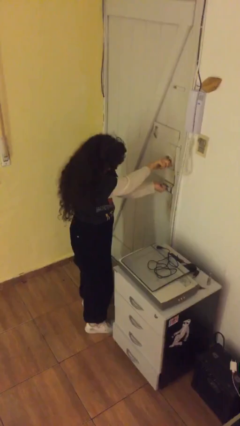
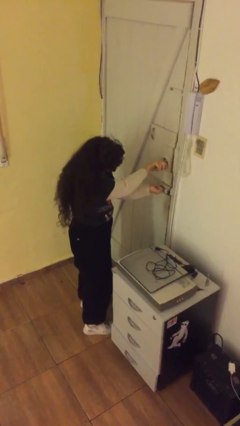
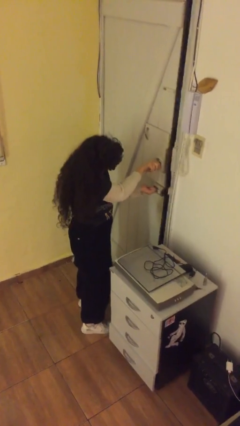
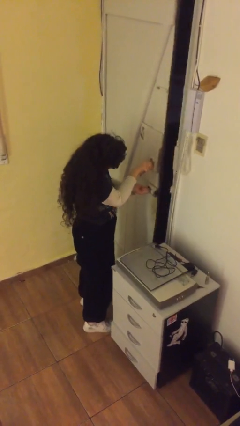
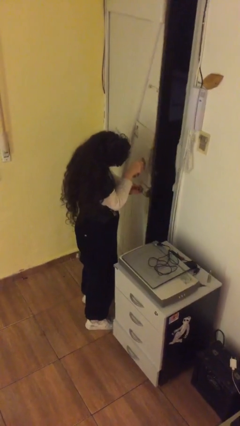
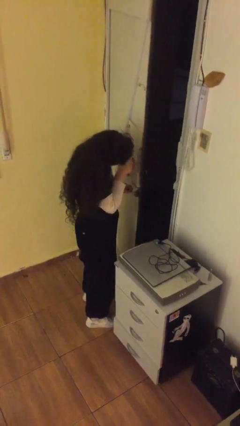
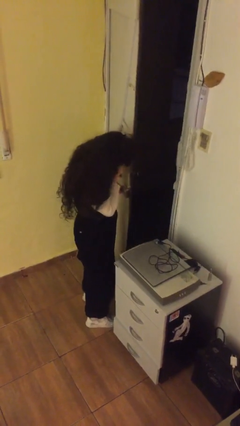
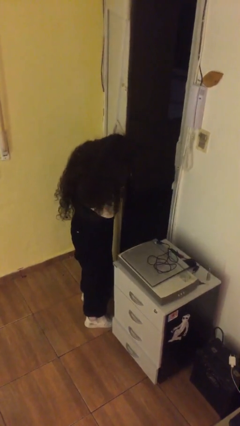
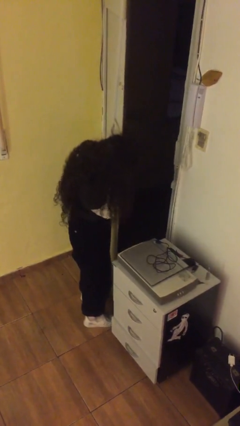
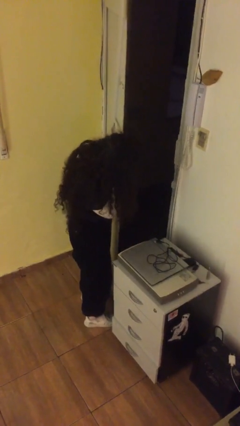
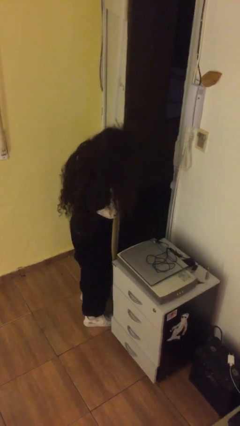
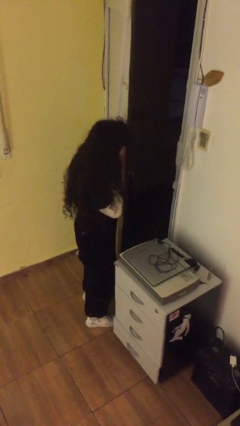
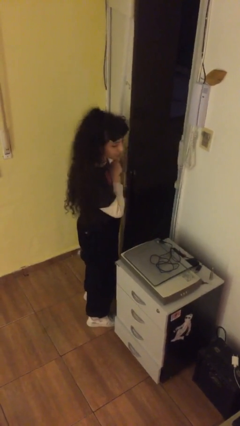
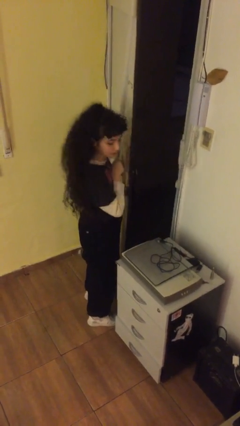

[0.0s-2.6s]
person opens facility door

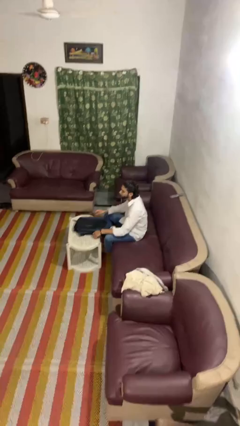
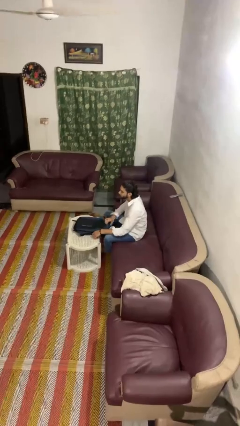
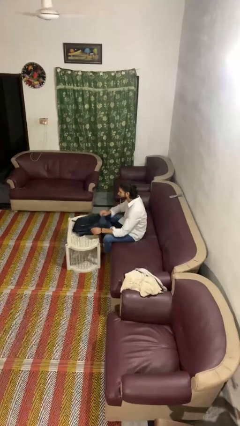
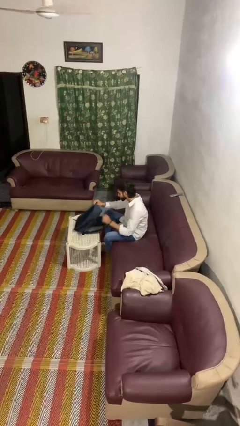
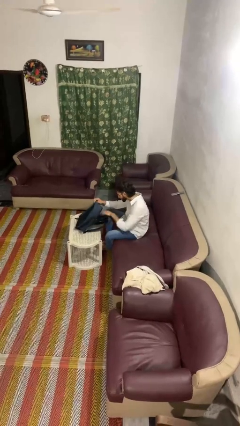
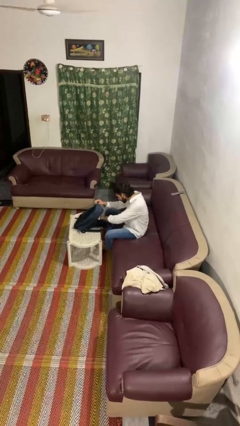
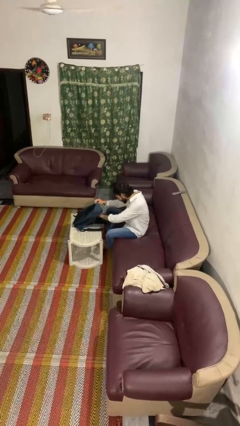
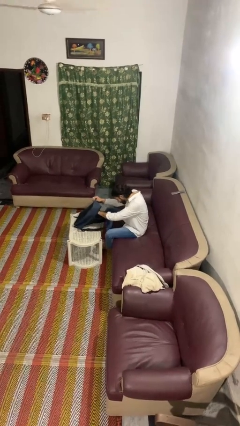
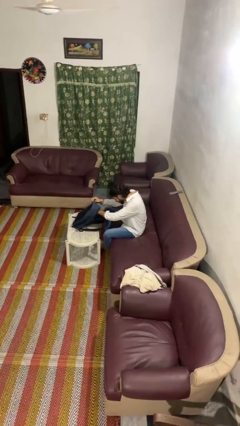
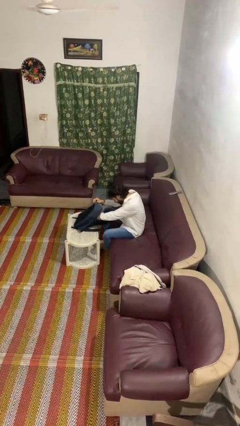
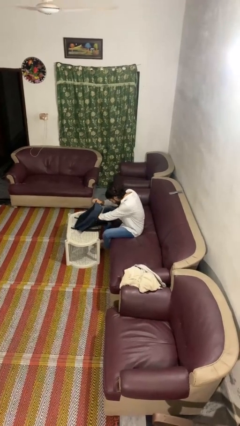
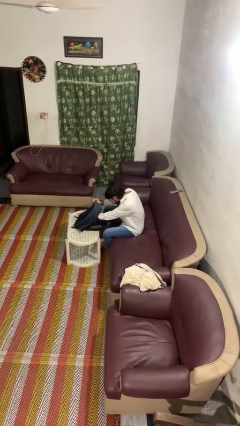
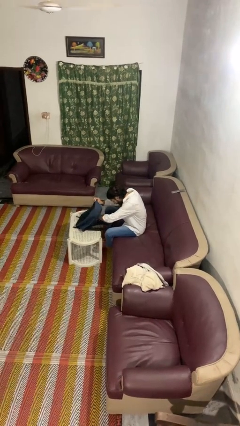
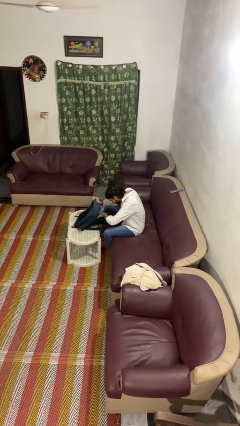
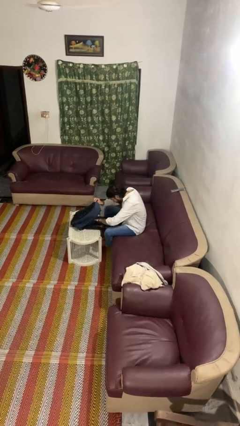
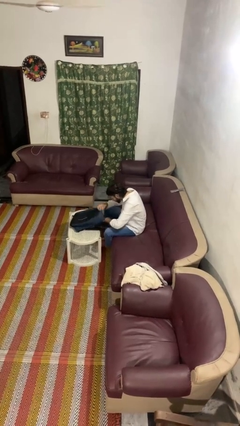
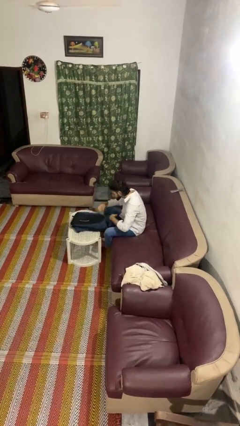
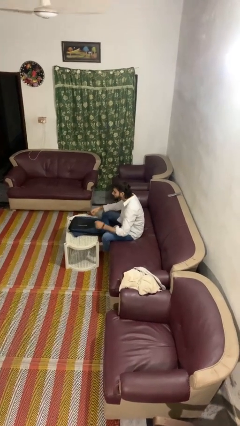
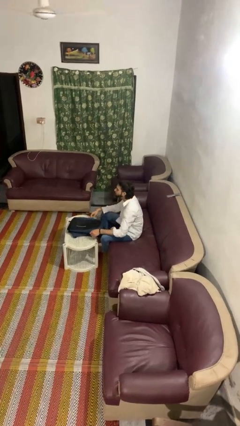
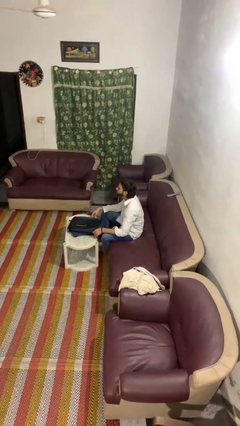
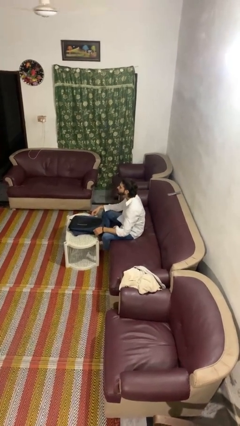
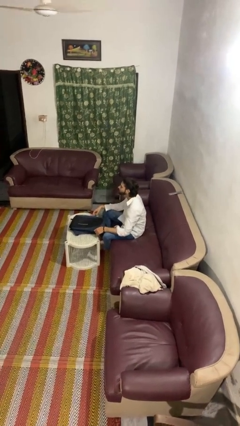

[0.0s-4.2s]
person searches in bag

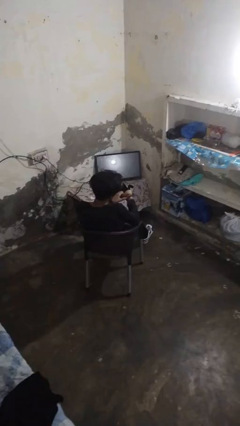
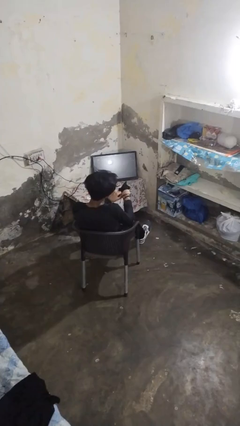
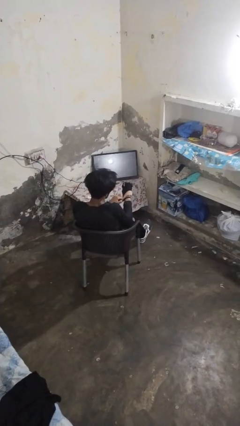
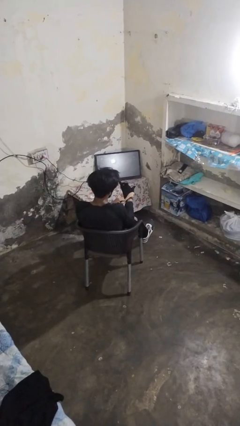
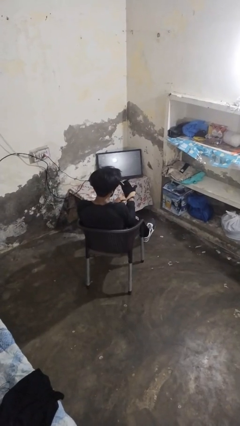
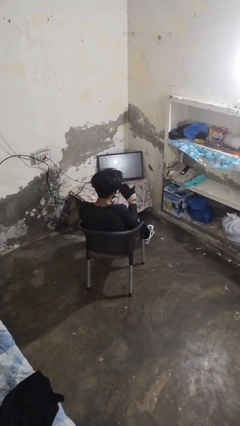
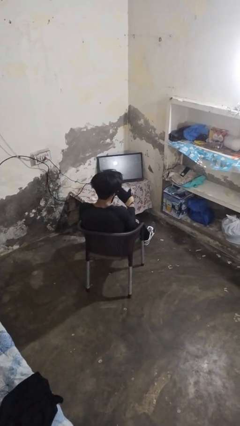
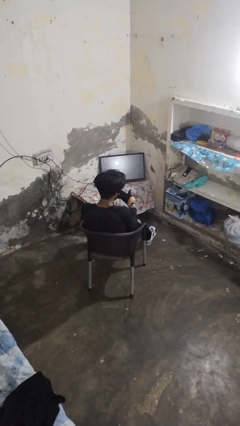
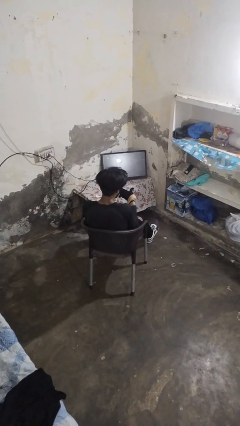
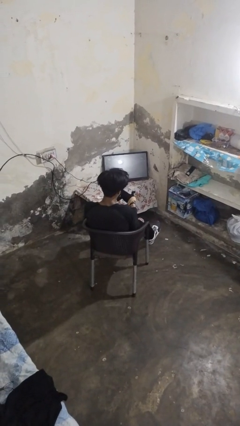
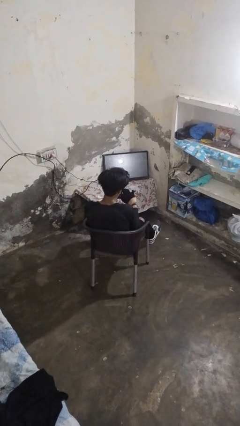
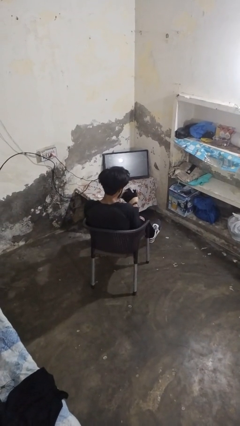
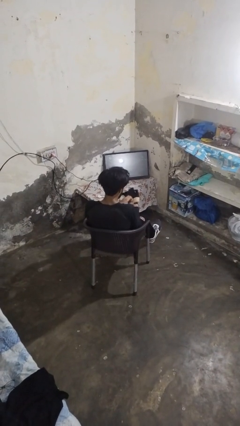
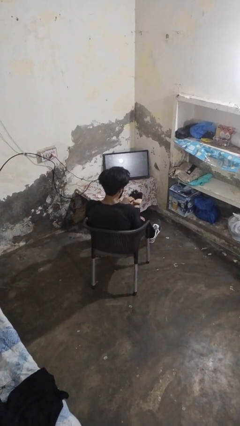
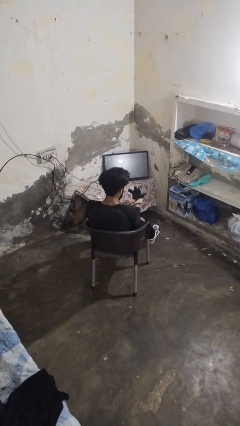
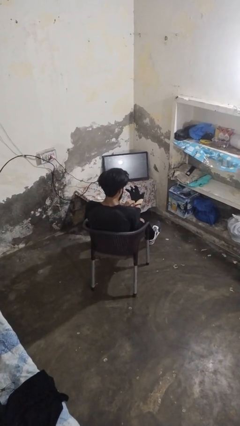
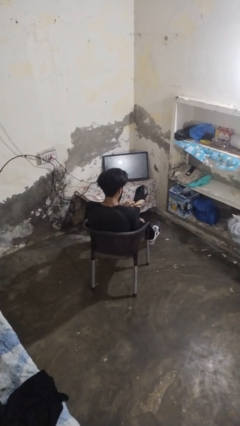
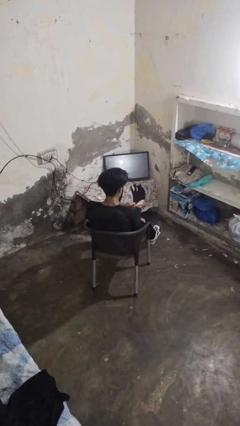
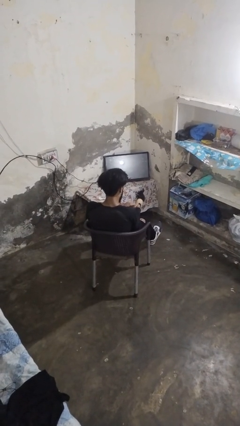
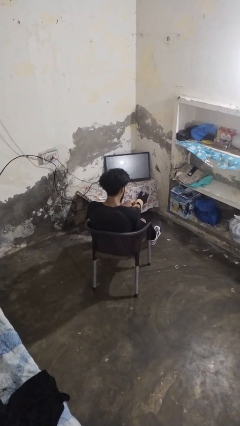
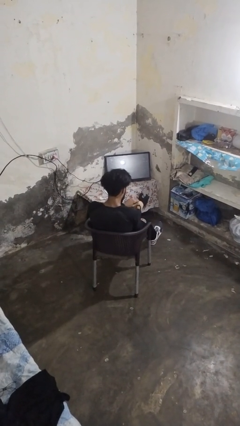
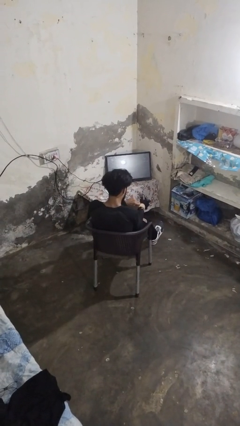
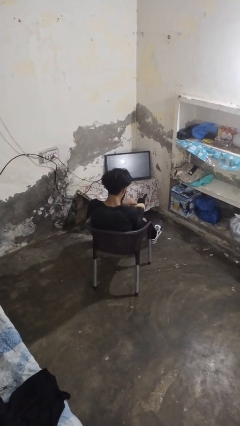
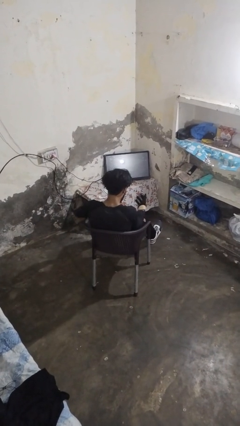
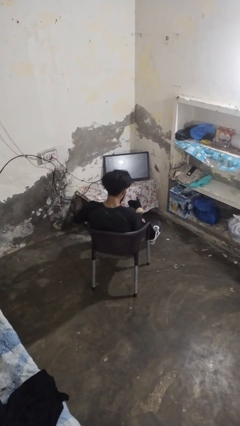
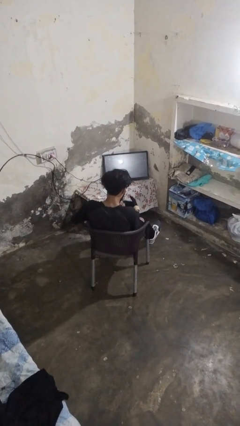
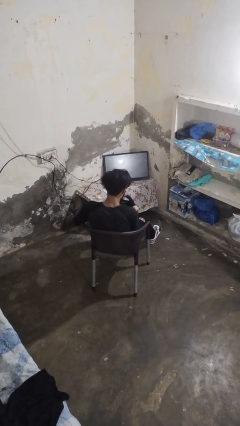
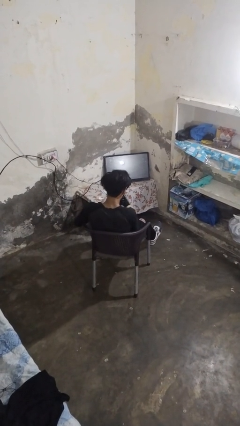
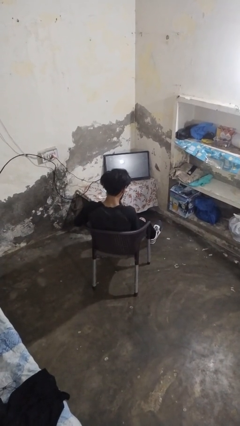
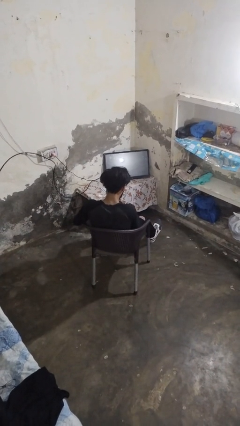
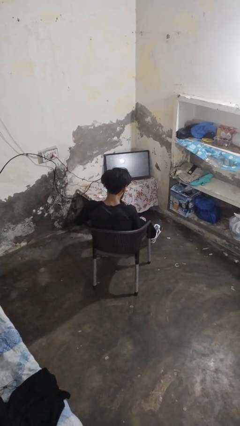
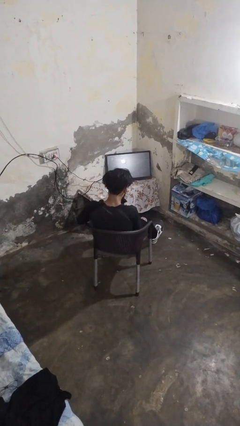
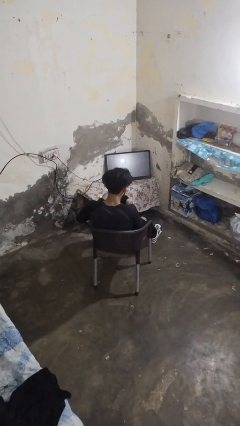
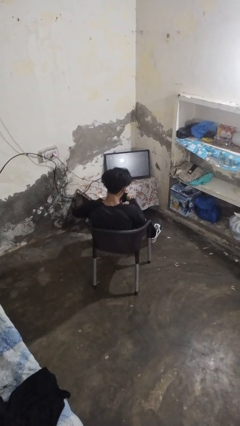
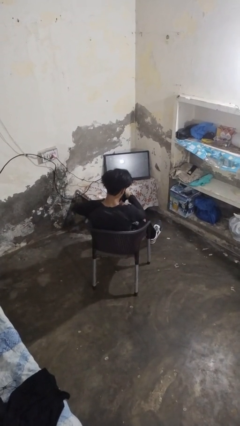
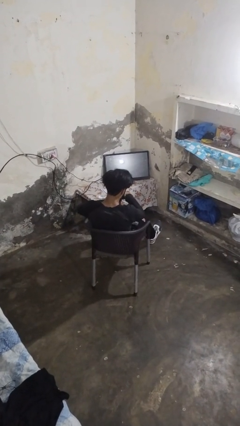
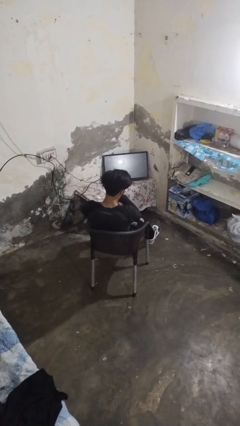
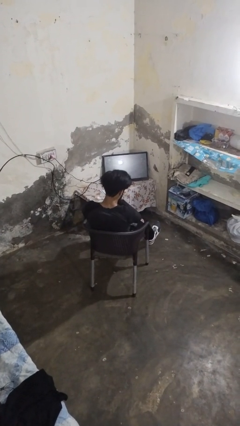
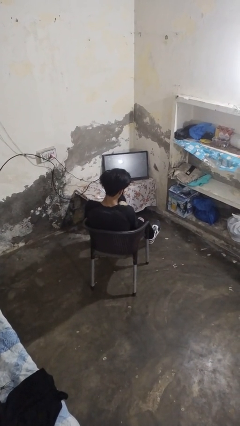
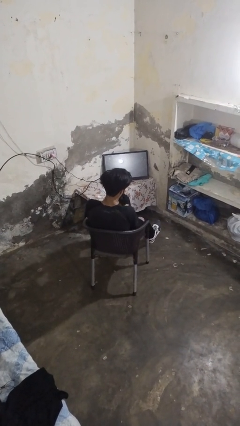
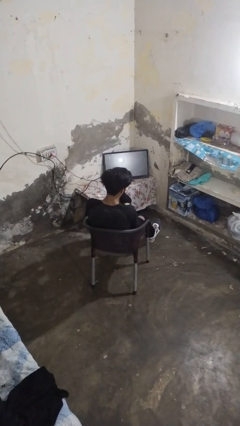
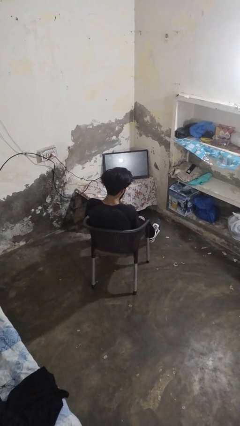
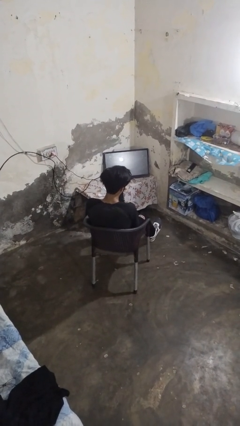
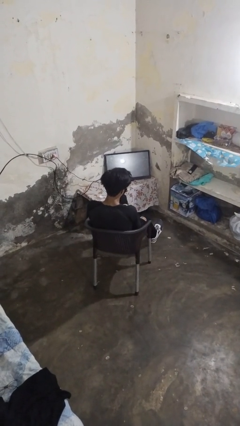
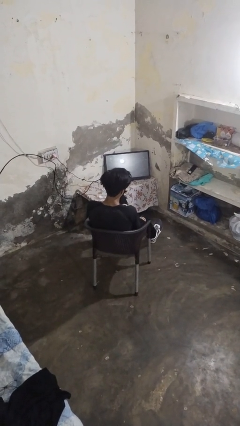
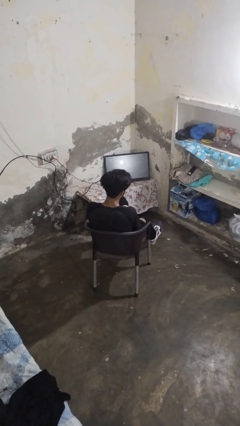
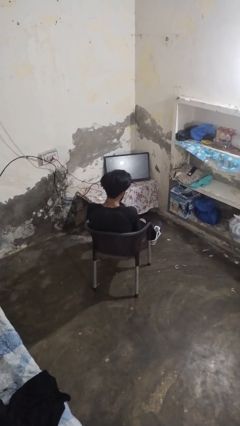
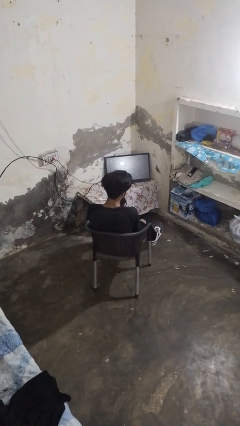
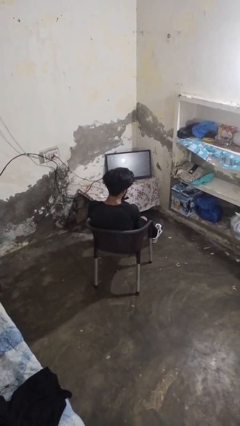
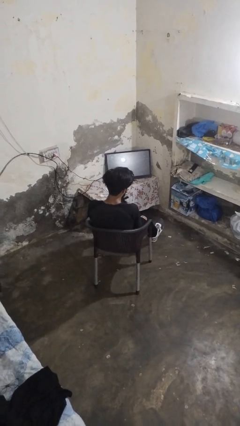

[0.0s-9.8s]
person puts on gloves

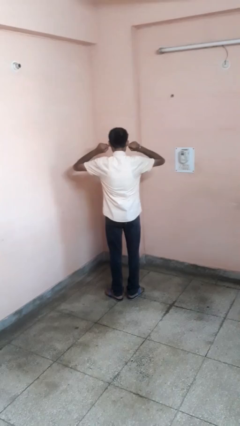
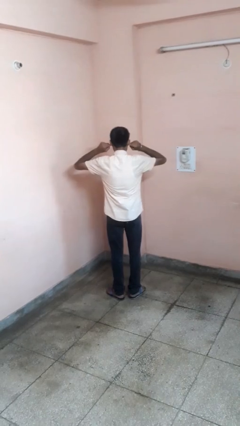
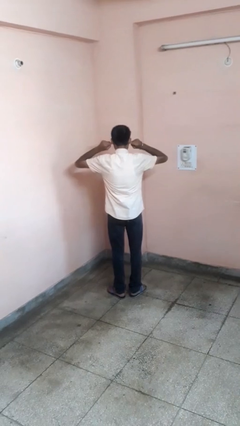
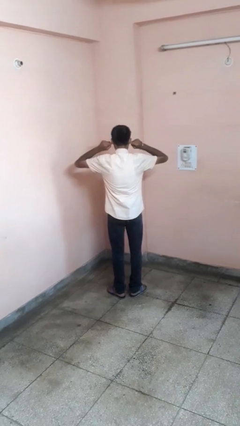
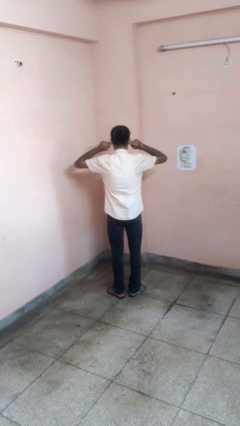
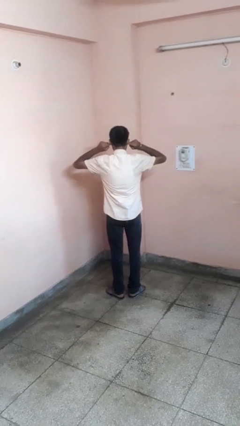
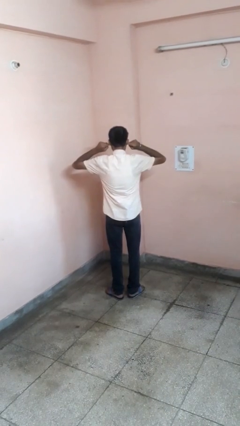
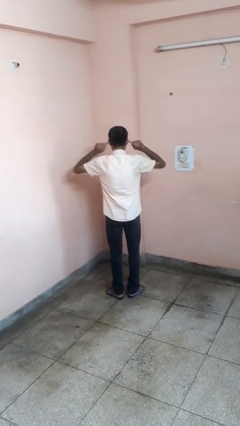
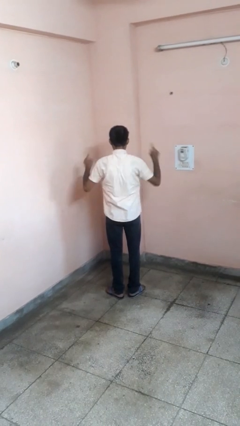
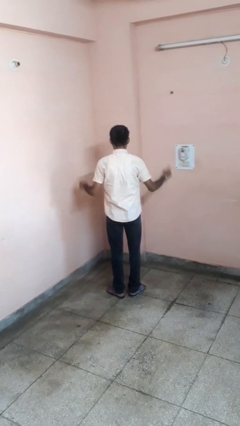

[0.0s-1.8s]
person puts fingers in ear
